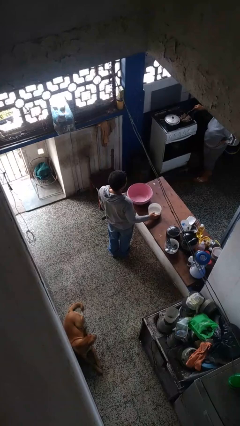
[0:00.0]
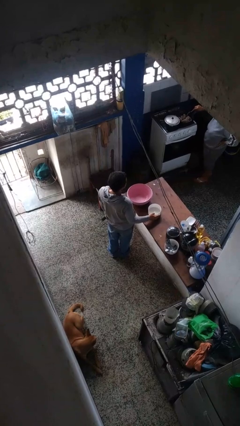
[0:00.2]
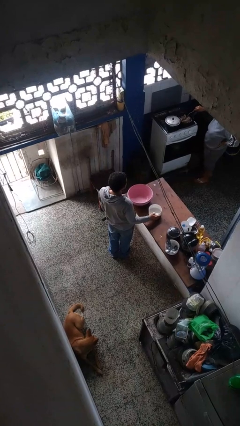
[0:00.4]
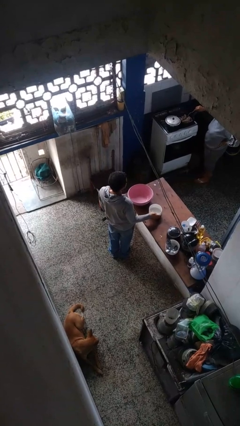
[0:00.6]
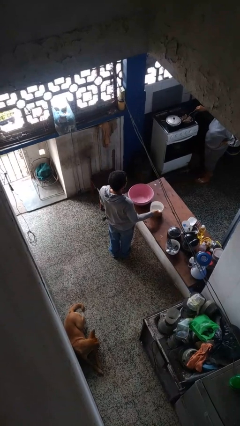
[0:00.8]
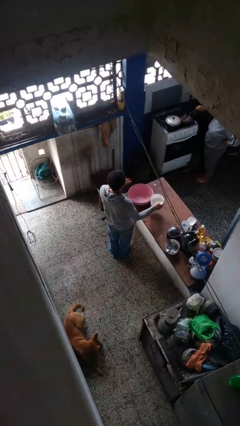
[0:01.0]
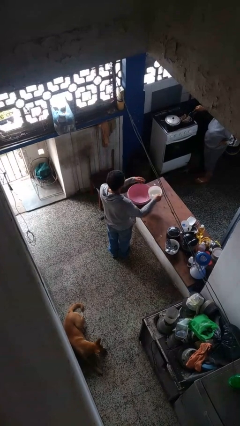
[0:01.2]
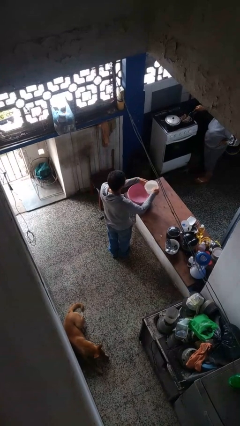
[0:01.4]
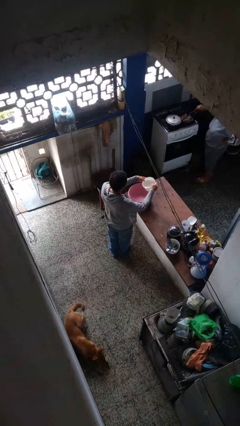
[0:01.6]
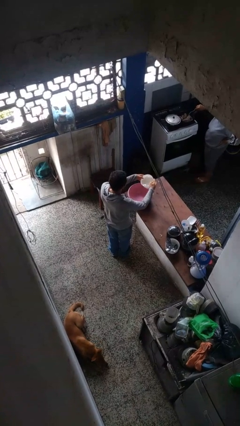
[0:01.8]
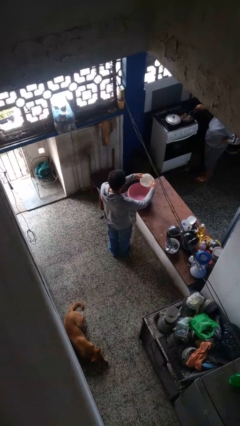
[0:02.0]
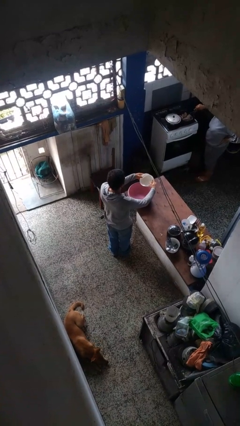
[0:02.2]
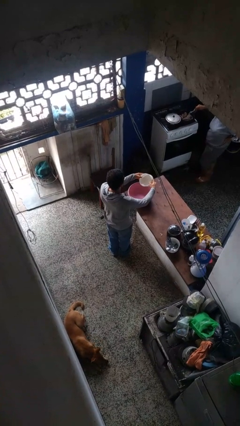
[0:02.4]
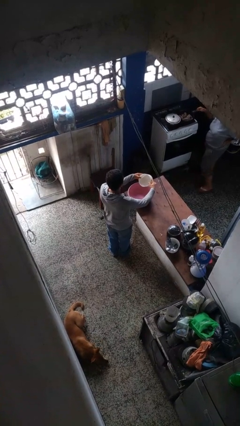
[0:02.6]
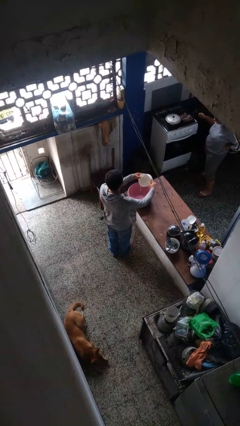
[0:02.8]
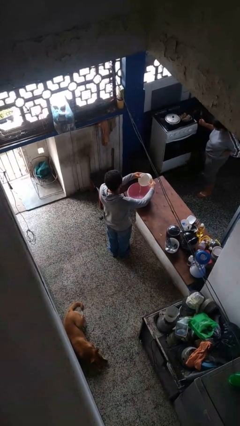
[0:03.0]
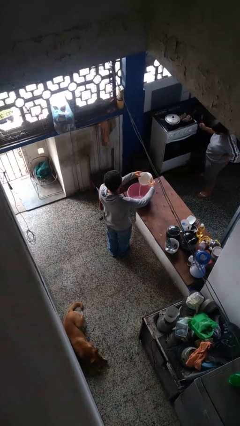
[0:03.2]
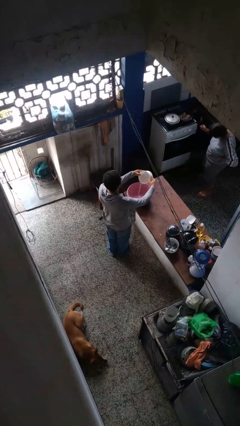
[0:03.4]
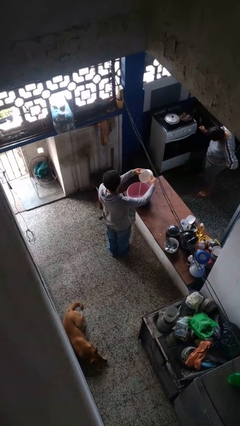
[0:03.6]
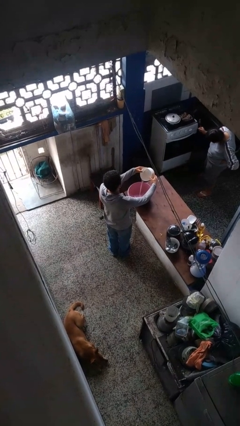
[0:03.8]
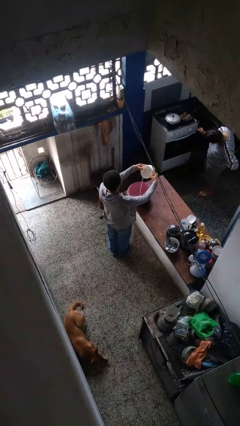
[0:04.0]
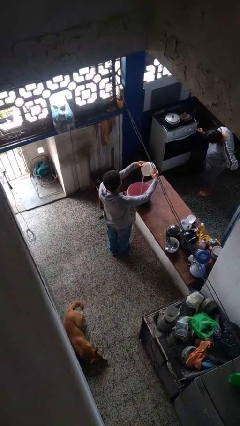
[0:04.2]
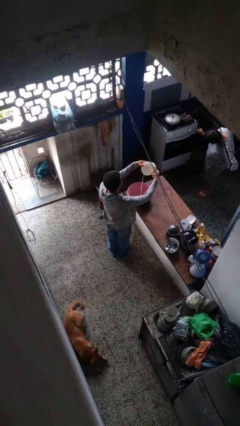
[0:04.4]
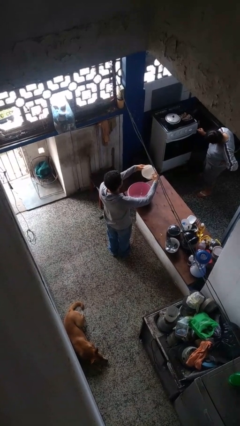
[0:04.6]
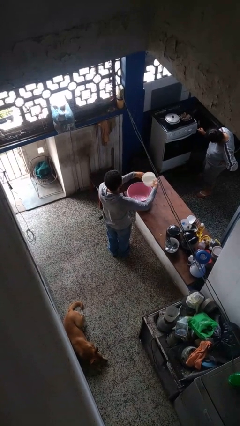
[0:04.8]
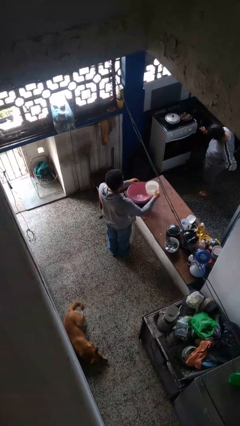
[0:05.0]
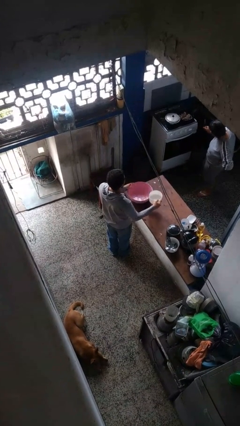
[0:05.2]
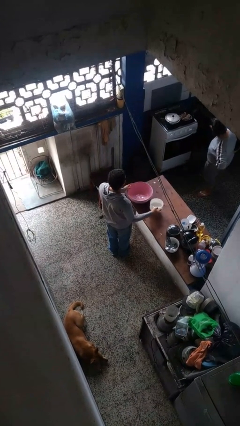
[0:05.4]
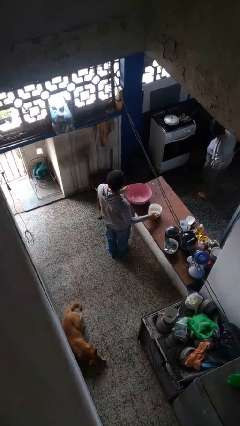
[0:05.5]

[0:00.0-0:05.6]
person pours into bowl

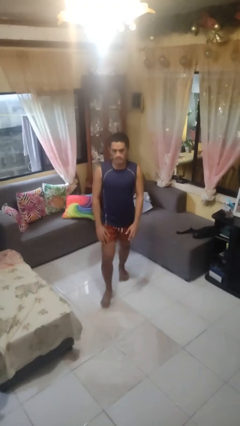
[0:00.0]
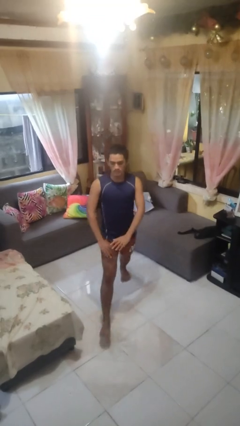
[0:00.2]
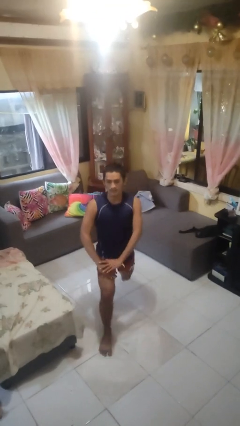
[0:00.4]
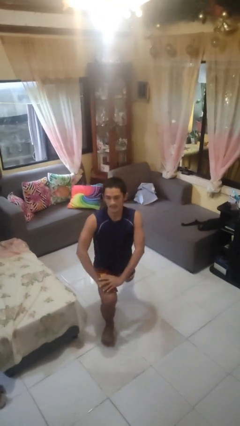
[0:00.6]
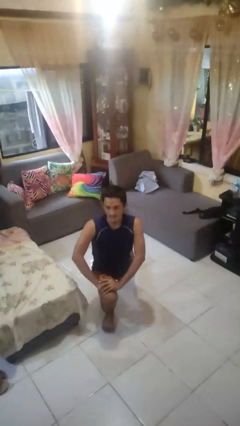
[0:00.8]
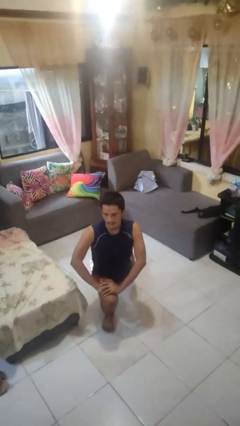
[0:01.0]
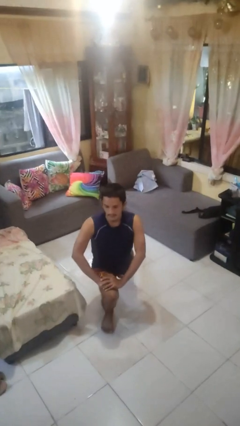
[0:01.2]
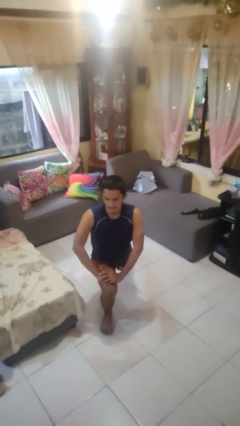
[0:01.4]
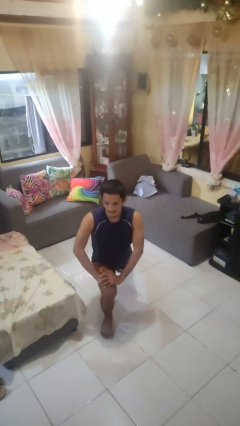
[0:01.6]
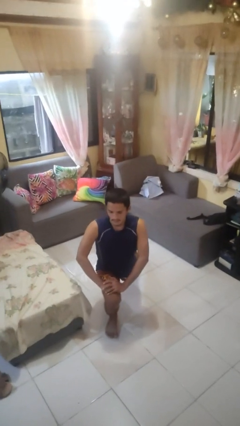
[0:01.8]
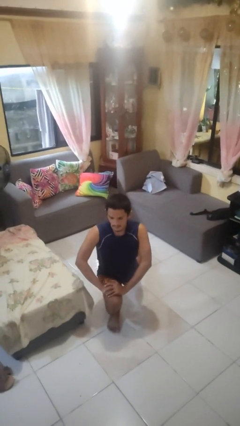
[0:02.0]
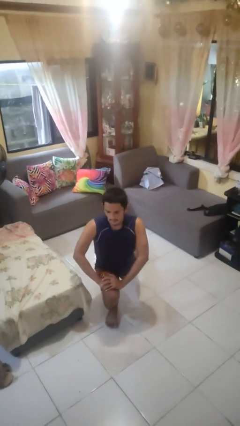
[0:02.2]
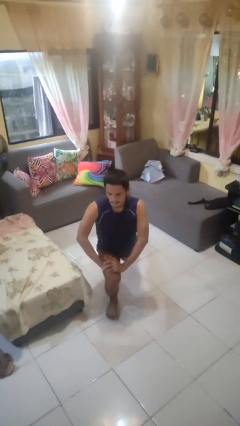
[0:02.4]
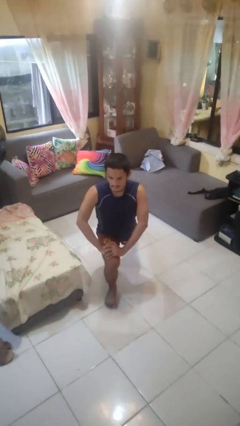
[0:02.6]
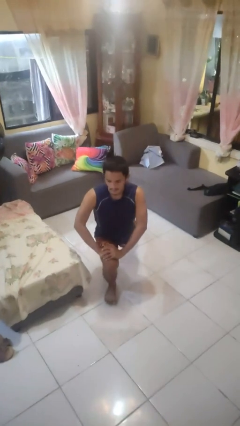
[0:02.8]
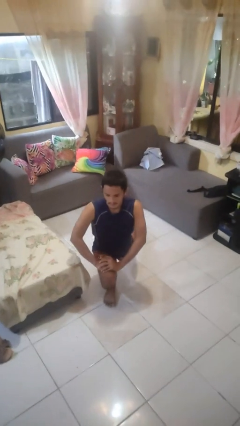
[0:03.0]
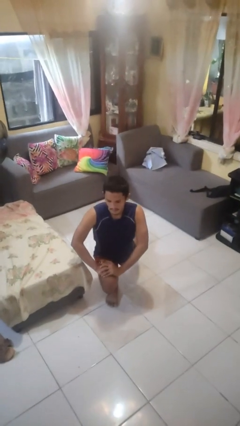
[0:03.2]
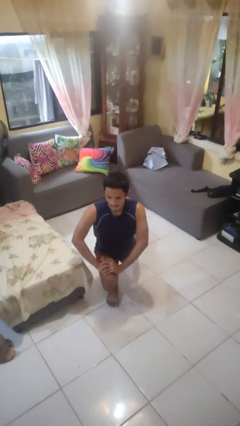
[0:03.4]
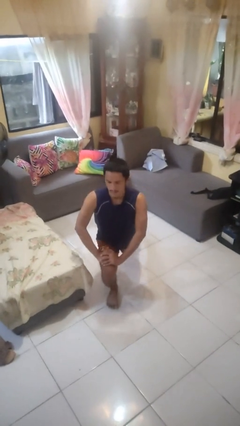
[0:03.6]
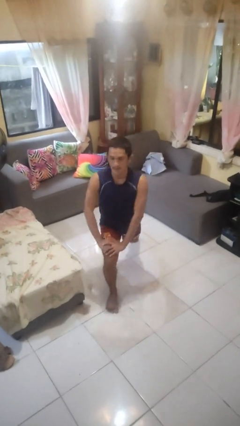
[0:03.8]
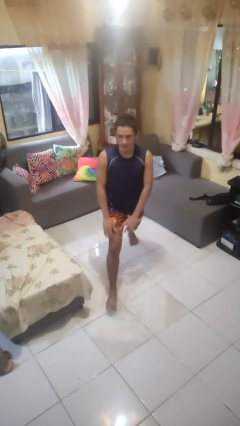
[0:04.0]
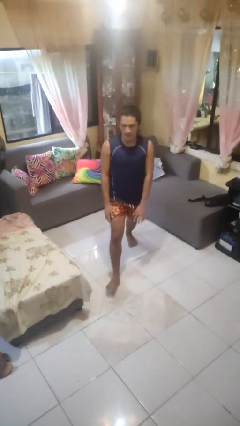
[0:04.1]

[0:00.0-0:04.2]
person exercises with lunges

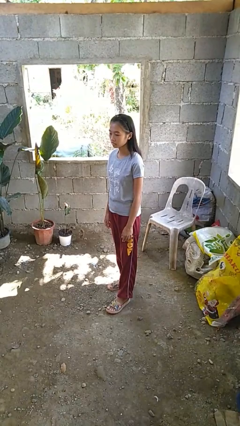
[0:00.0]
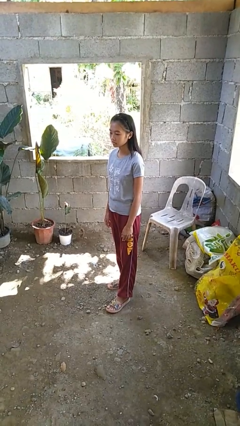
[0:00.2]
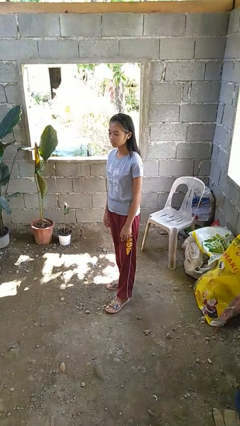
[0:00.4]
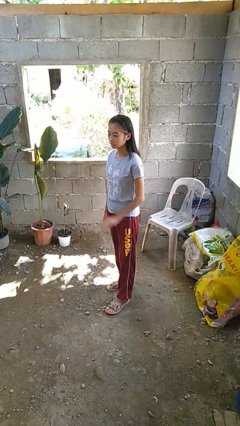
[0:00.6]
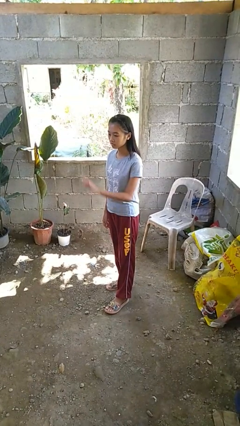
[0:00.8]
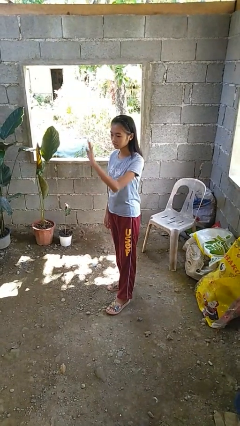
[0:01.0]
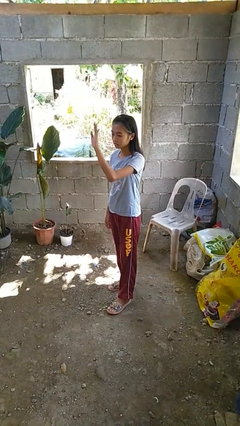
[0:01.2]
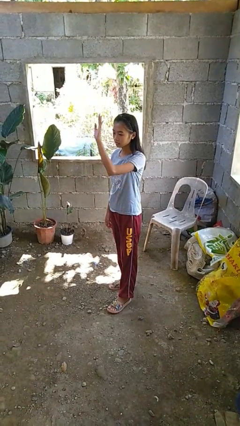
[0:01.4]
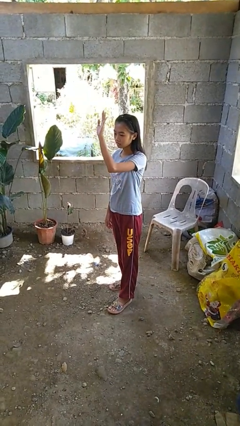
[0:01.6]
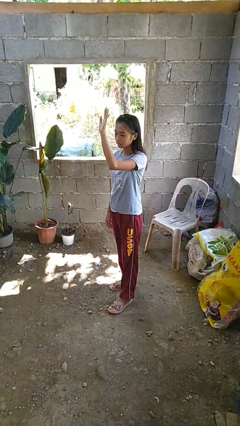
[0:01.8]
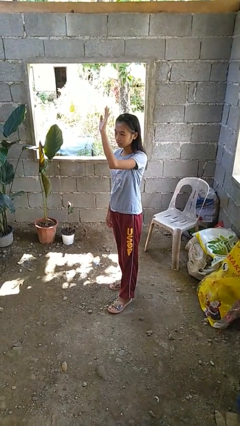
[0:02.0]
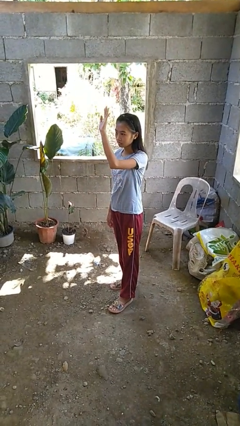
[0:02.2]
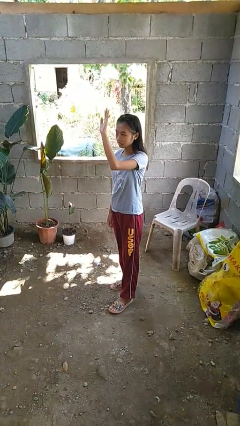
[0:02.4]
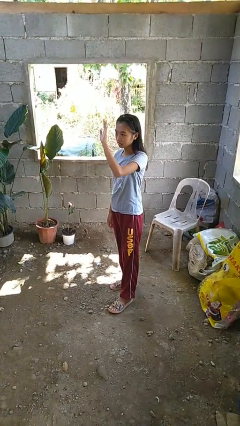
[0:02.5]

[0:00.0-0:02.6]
person gestures swipe up

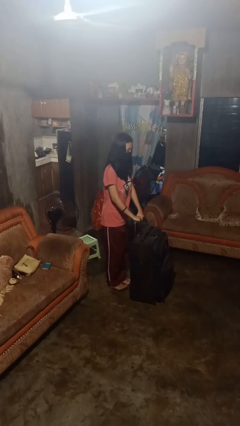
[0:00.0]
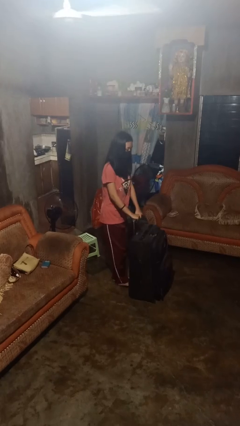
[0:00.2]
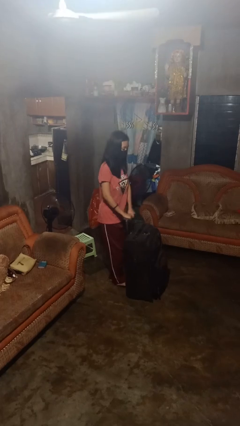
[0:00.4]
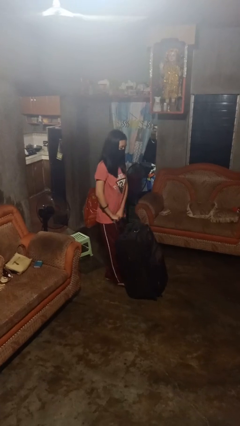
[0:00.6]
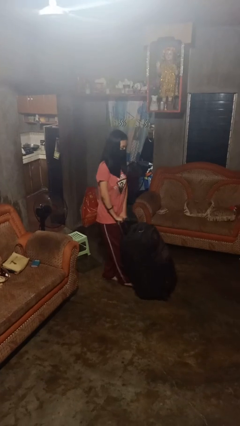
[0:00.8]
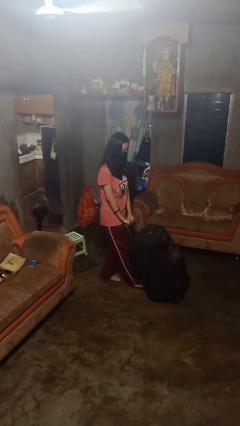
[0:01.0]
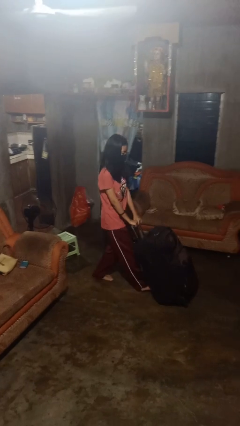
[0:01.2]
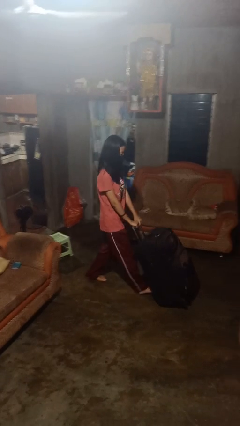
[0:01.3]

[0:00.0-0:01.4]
person pushes wheeled cart

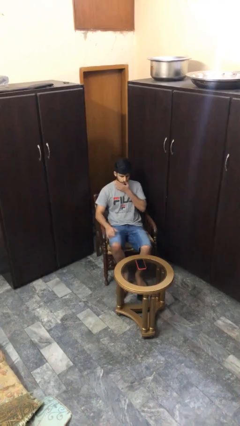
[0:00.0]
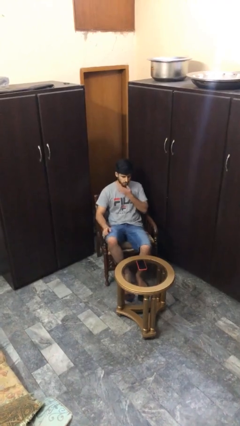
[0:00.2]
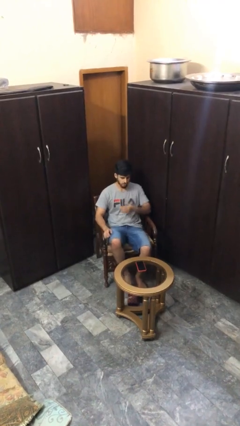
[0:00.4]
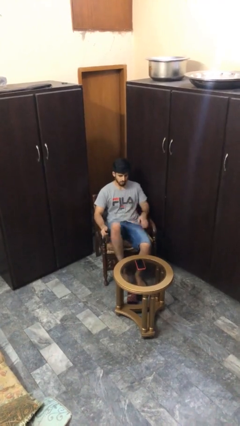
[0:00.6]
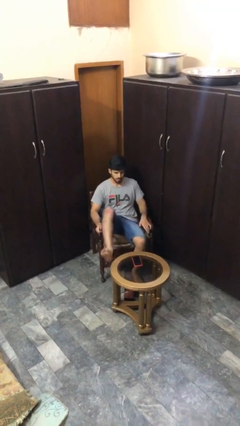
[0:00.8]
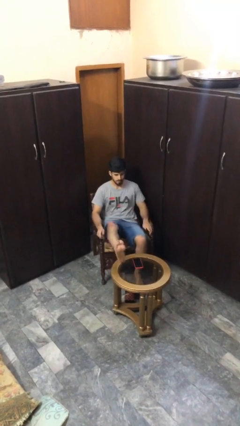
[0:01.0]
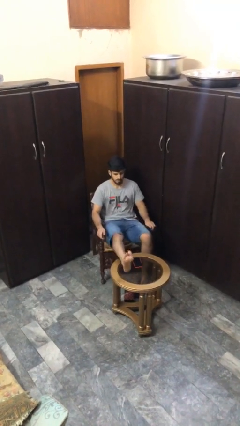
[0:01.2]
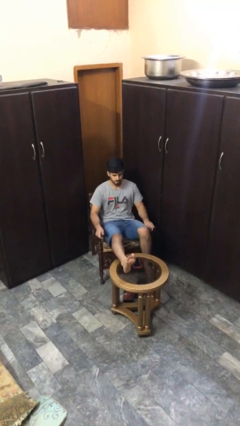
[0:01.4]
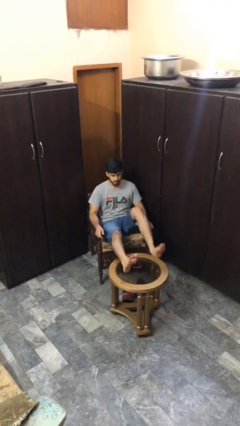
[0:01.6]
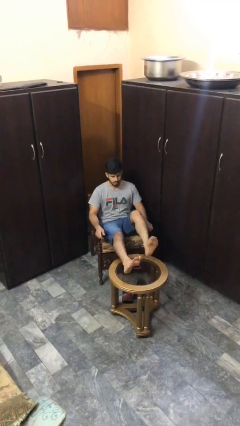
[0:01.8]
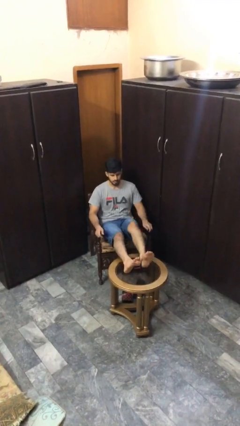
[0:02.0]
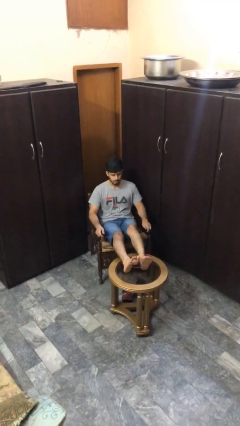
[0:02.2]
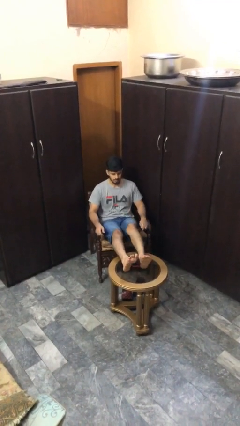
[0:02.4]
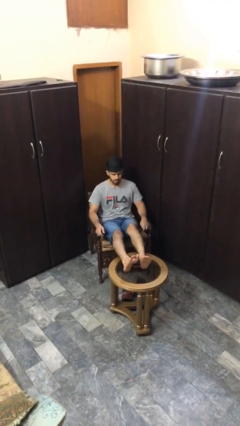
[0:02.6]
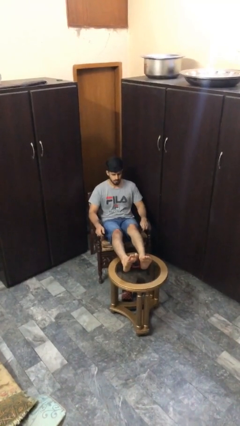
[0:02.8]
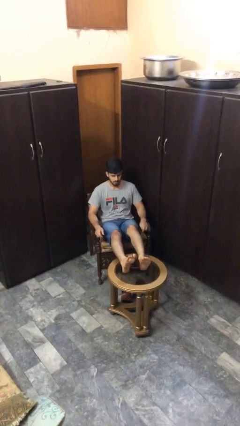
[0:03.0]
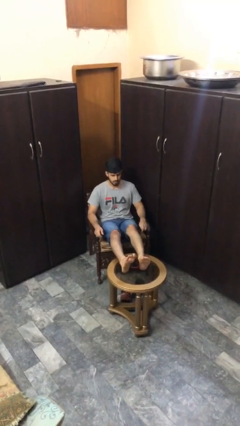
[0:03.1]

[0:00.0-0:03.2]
person puts feet up

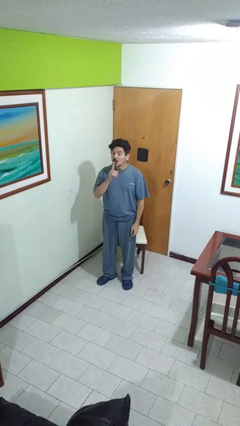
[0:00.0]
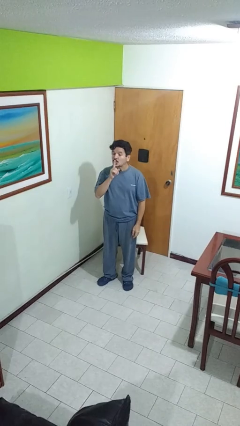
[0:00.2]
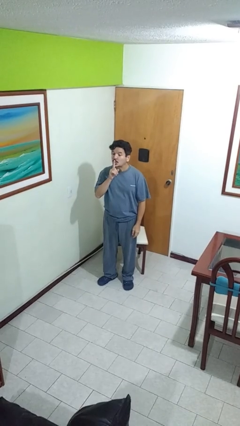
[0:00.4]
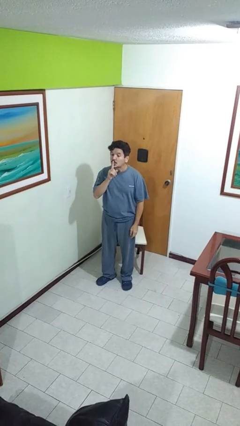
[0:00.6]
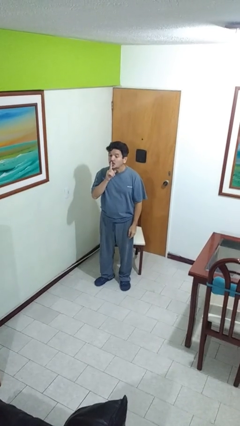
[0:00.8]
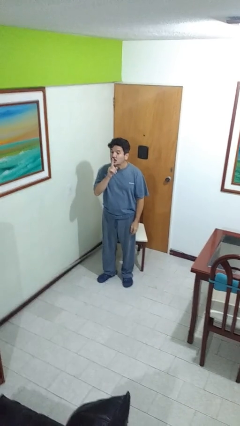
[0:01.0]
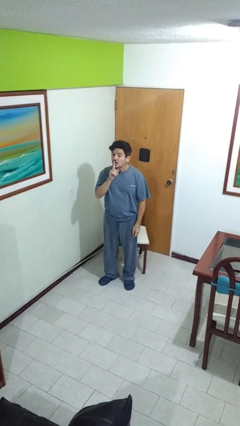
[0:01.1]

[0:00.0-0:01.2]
person gestures be quiet
